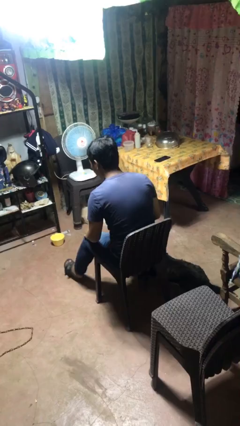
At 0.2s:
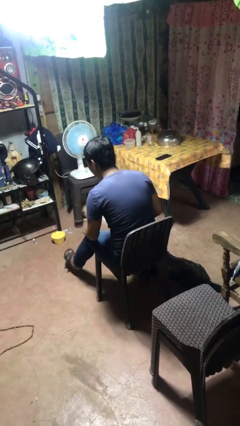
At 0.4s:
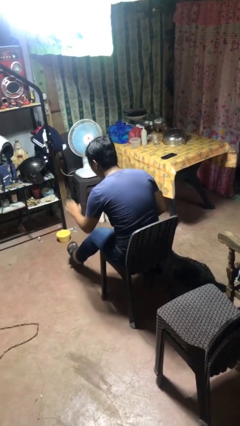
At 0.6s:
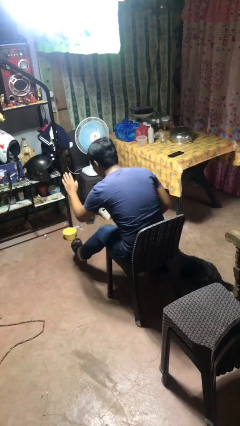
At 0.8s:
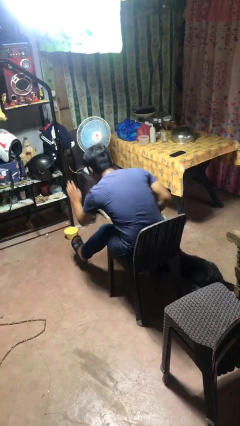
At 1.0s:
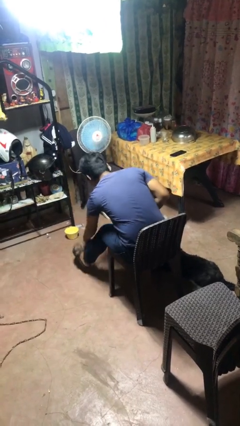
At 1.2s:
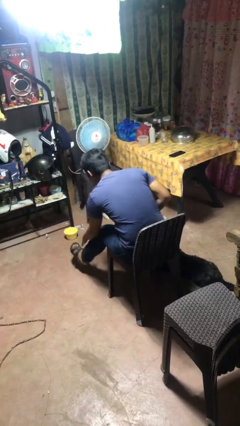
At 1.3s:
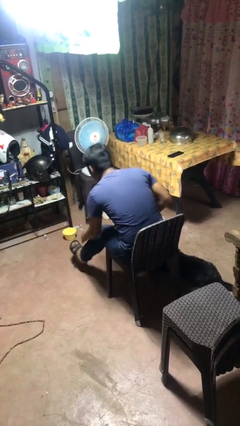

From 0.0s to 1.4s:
person swats bug

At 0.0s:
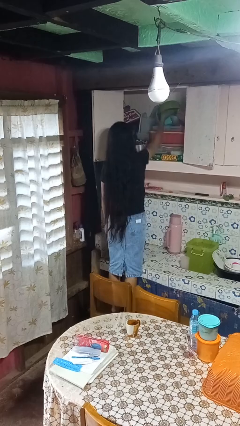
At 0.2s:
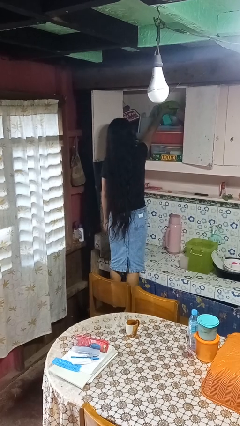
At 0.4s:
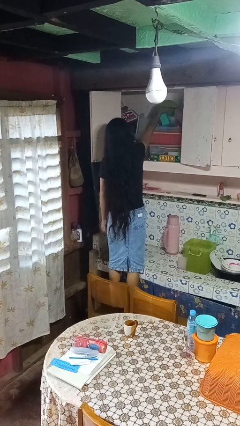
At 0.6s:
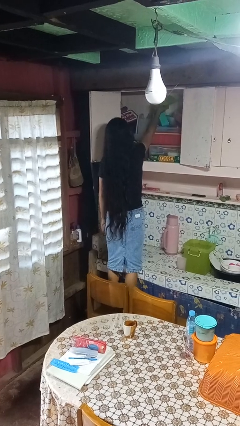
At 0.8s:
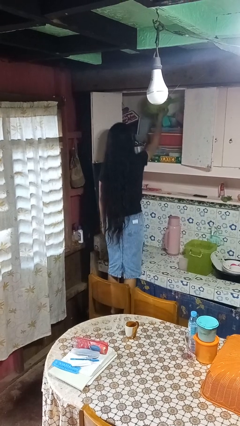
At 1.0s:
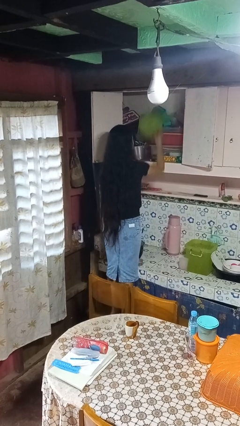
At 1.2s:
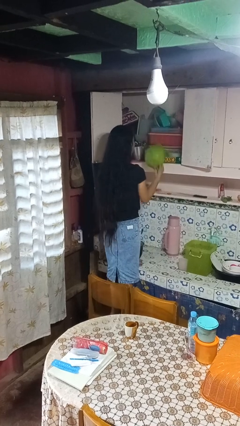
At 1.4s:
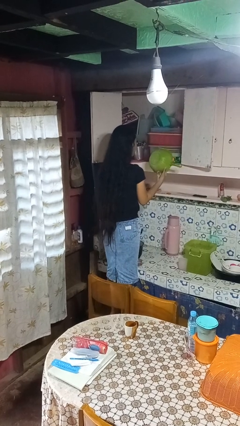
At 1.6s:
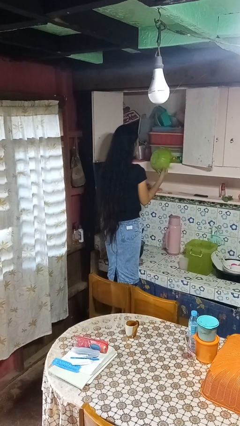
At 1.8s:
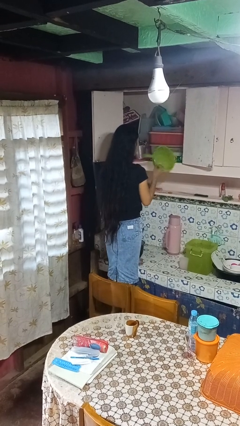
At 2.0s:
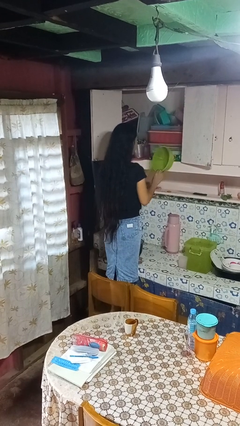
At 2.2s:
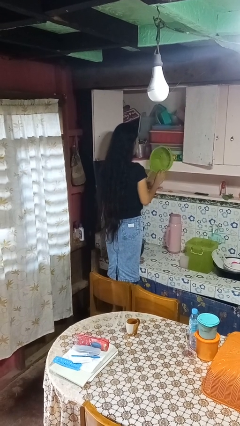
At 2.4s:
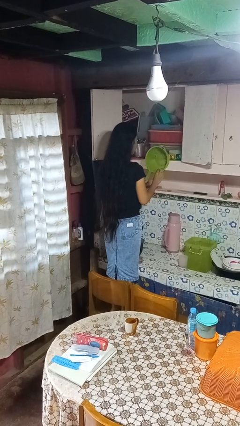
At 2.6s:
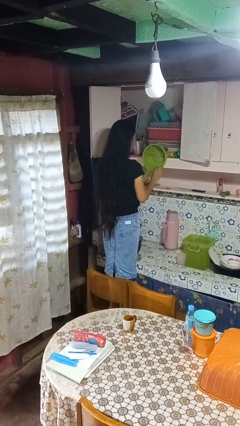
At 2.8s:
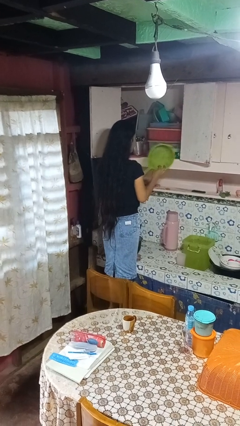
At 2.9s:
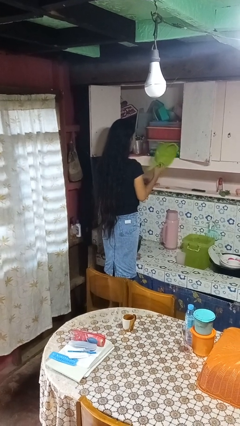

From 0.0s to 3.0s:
person takes object from cabinet

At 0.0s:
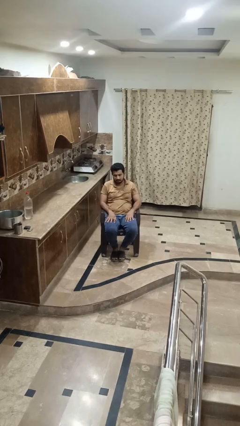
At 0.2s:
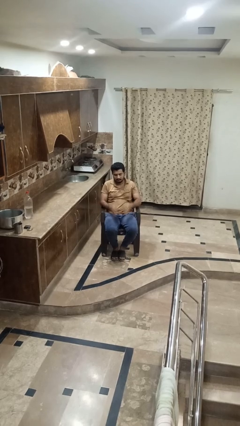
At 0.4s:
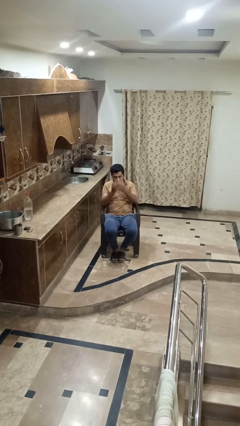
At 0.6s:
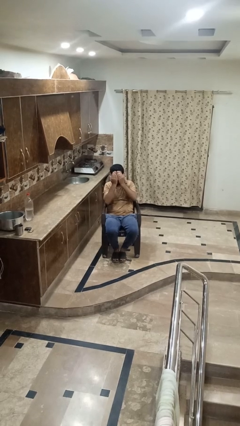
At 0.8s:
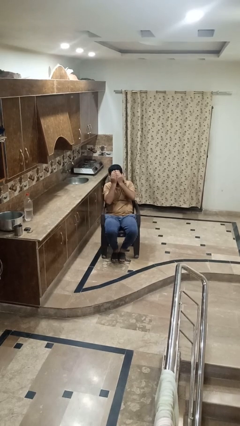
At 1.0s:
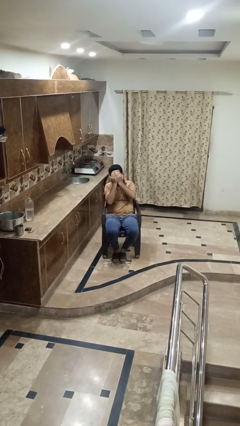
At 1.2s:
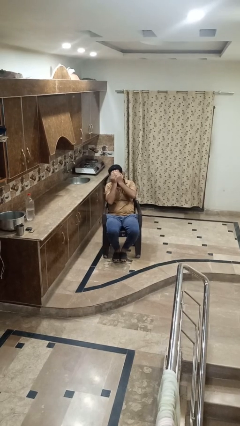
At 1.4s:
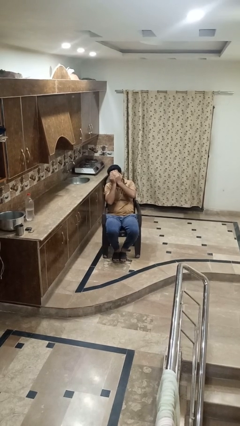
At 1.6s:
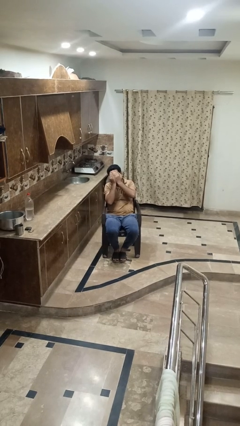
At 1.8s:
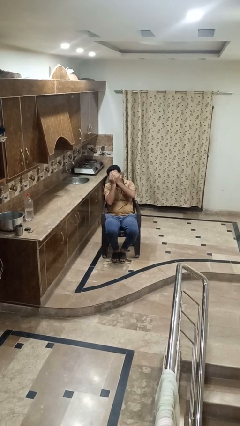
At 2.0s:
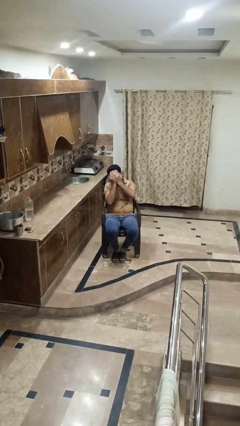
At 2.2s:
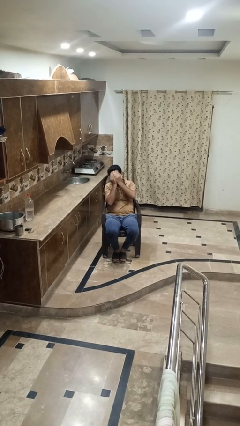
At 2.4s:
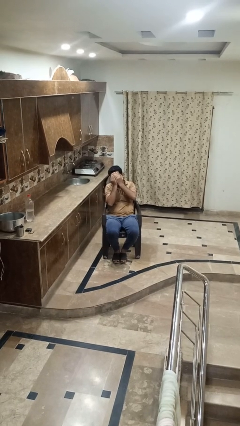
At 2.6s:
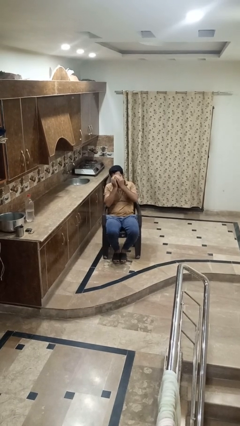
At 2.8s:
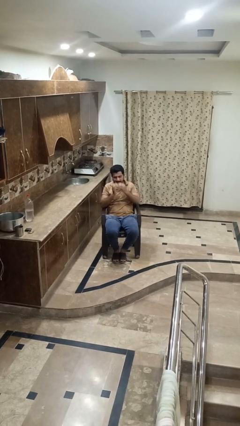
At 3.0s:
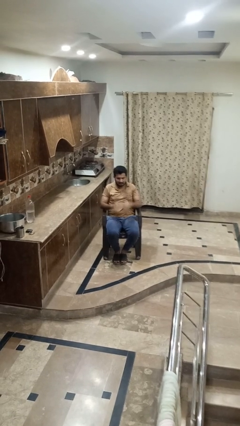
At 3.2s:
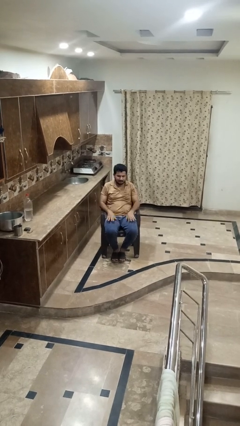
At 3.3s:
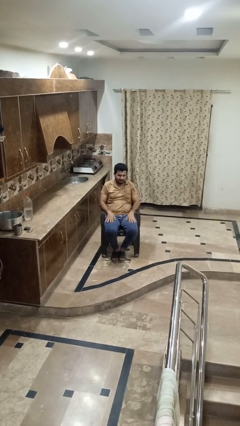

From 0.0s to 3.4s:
person covers face with hands

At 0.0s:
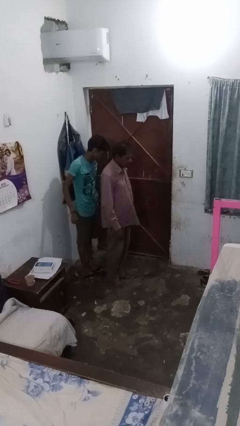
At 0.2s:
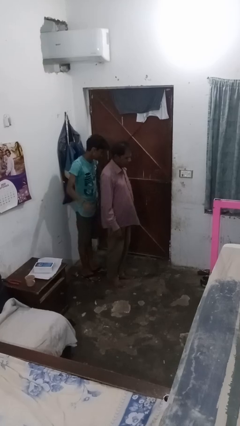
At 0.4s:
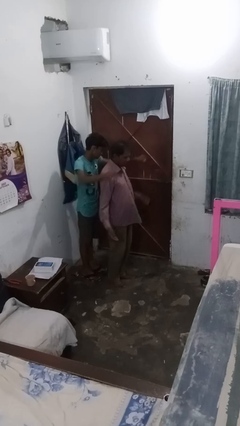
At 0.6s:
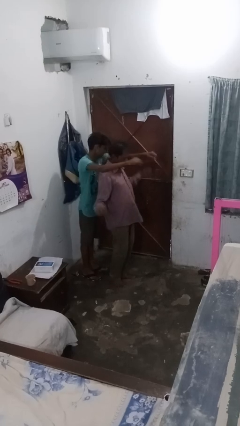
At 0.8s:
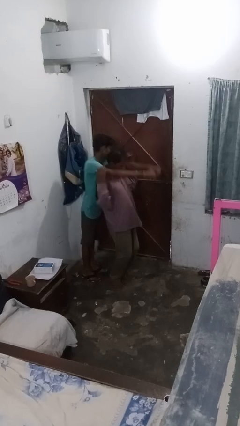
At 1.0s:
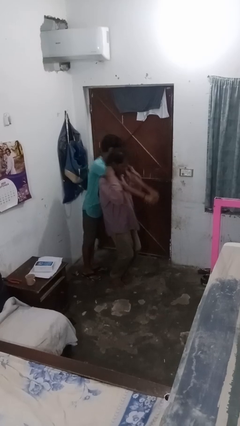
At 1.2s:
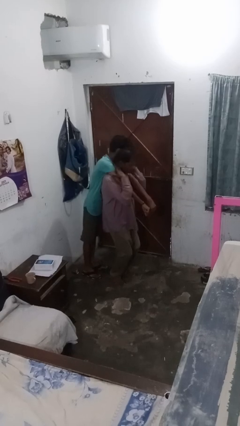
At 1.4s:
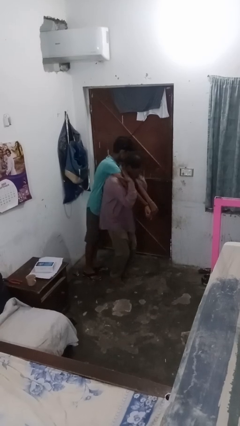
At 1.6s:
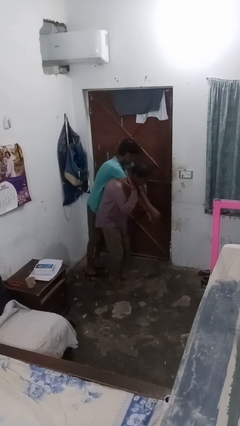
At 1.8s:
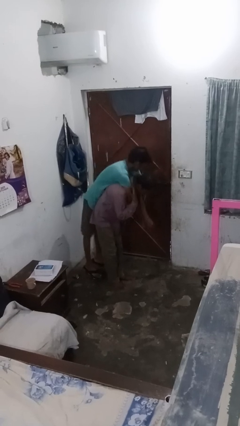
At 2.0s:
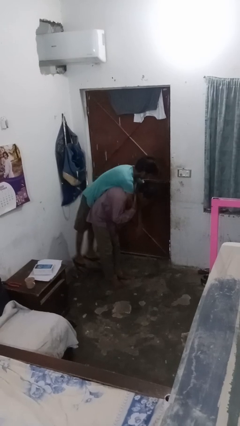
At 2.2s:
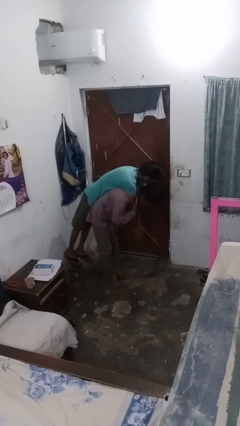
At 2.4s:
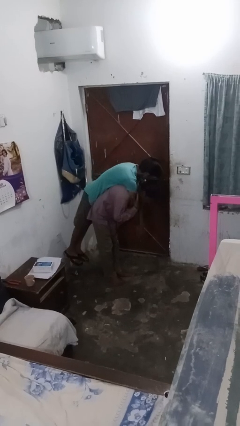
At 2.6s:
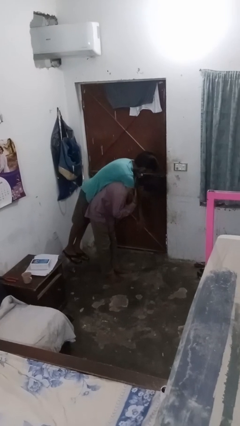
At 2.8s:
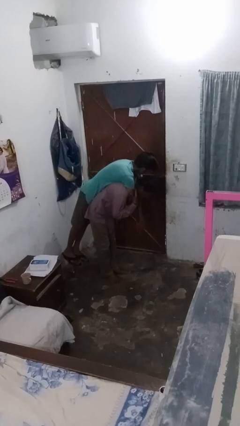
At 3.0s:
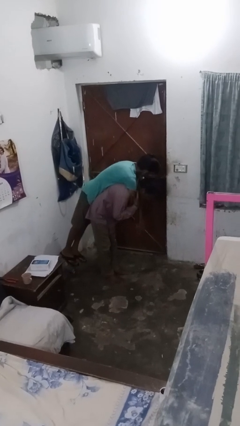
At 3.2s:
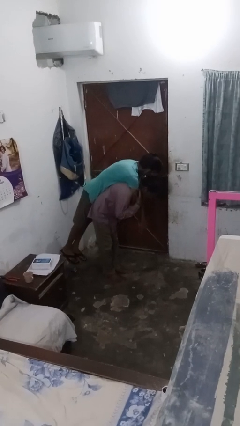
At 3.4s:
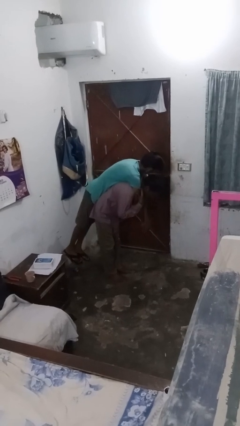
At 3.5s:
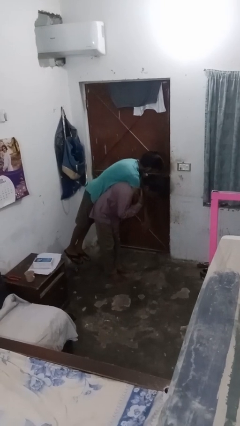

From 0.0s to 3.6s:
person carries person on shoulders

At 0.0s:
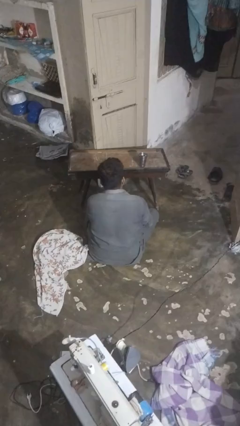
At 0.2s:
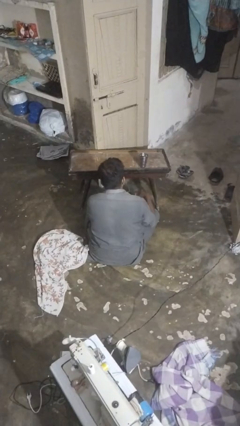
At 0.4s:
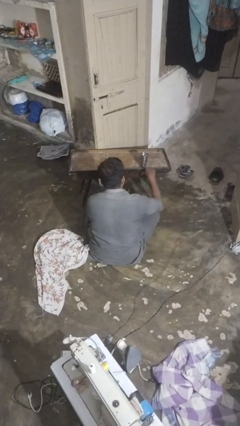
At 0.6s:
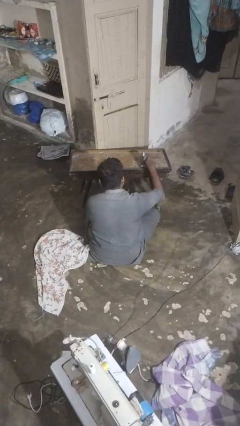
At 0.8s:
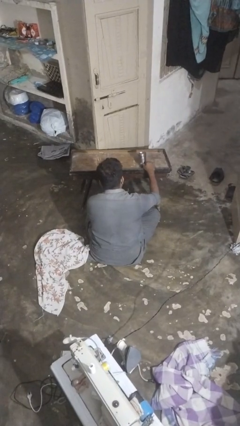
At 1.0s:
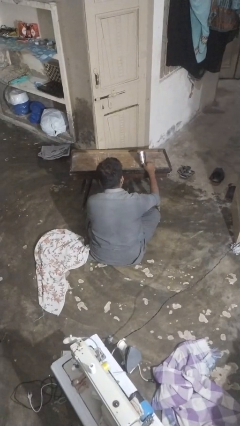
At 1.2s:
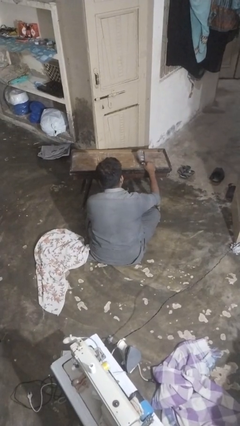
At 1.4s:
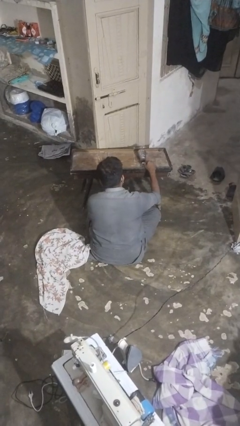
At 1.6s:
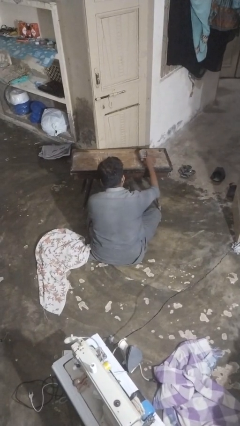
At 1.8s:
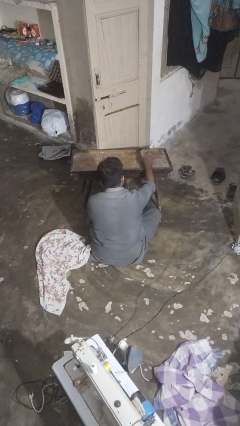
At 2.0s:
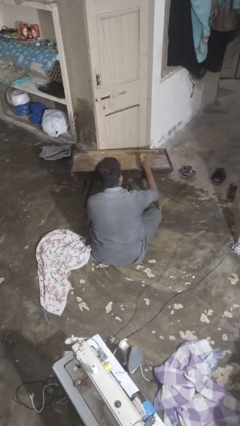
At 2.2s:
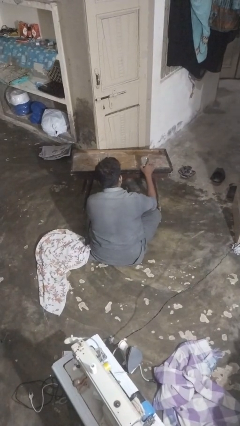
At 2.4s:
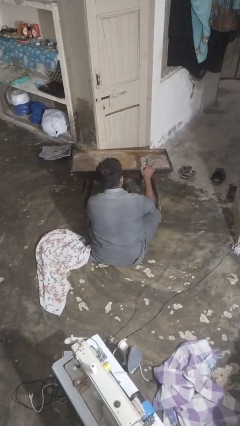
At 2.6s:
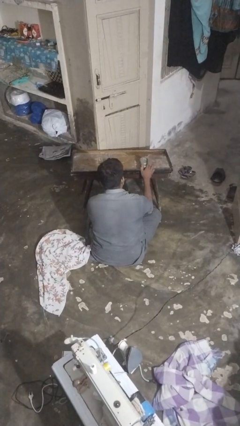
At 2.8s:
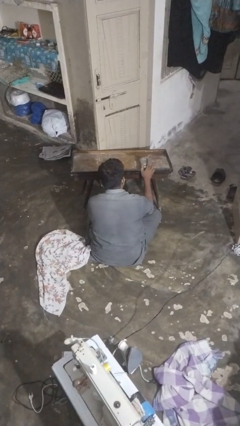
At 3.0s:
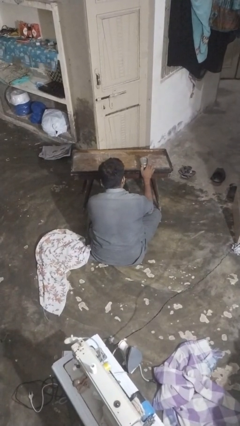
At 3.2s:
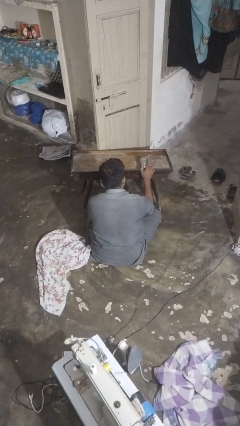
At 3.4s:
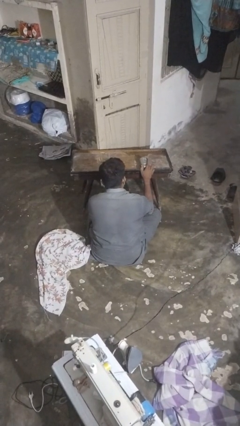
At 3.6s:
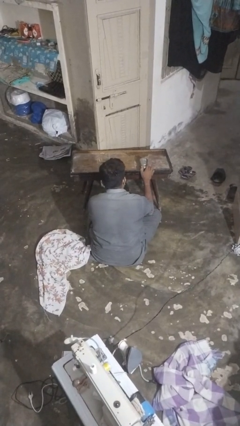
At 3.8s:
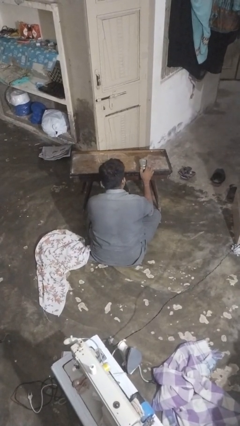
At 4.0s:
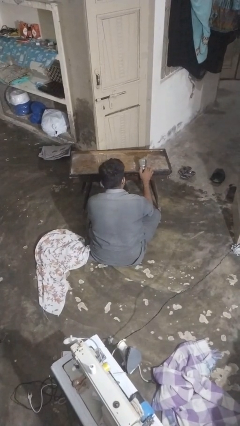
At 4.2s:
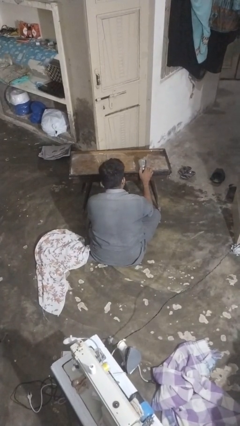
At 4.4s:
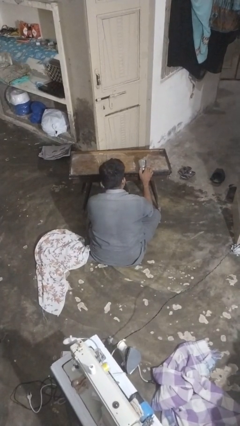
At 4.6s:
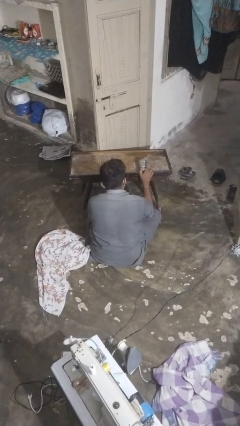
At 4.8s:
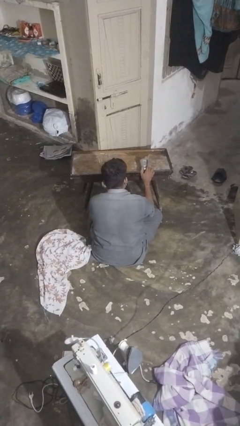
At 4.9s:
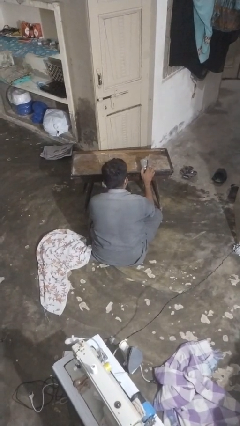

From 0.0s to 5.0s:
person spills on table

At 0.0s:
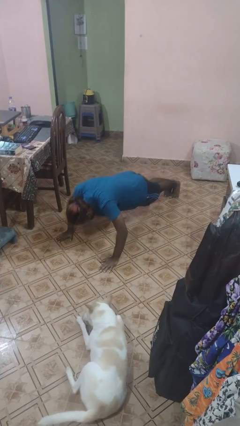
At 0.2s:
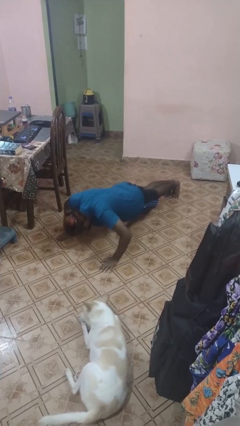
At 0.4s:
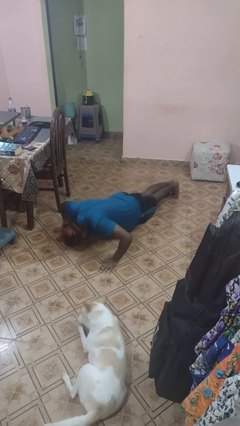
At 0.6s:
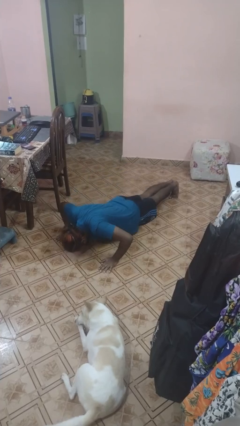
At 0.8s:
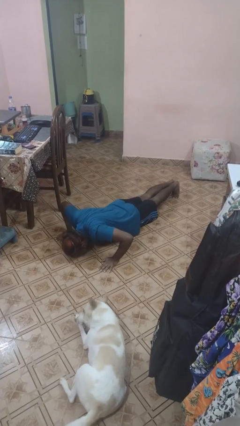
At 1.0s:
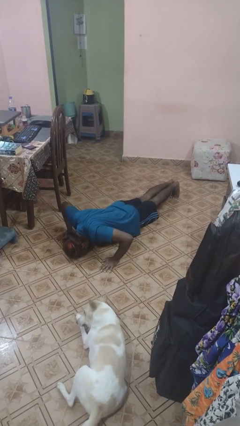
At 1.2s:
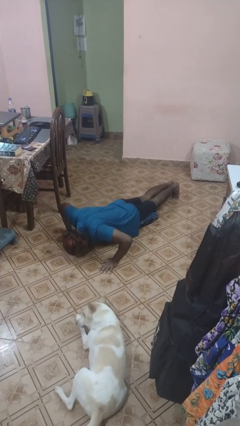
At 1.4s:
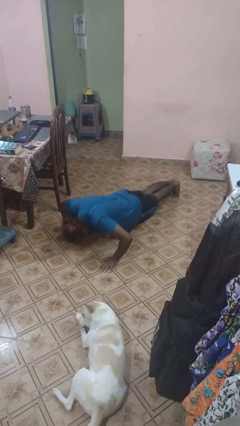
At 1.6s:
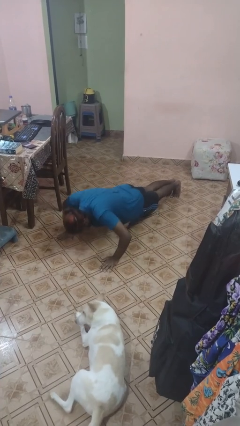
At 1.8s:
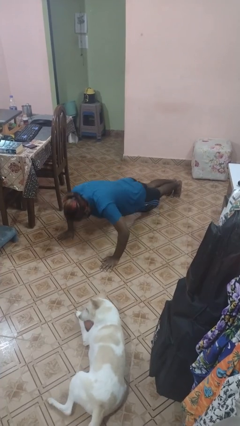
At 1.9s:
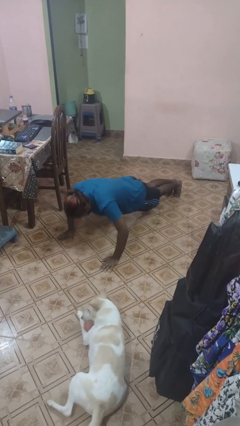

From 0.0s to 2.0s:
person exercises with pushup
